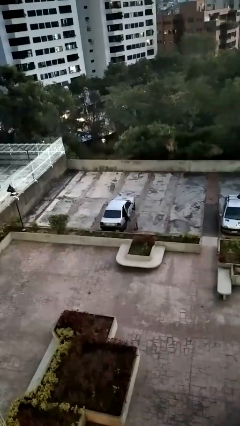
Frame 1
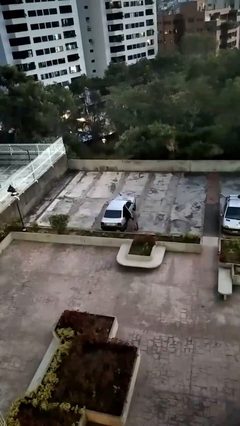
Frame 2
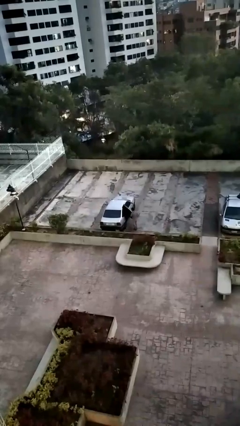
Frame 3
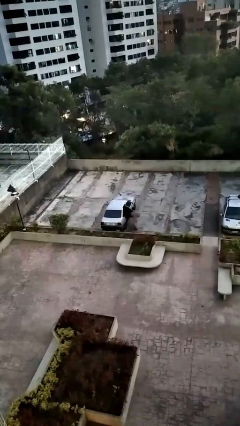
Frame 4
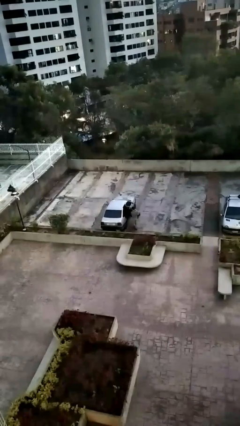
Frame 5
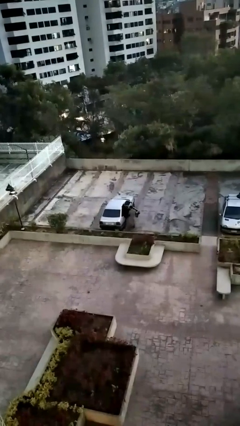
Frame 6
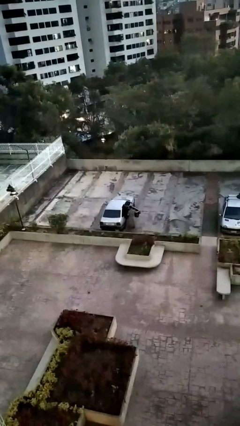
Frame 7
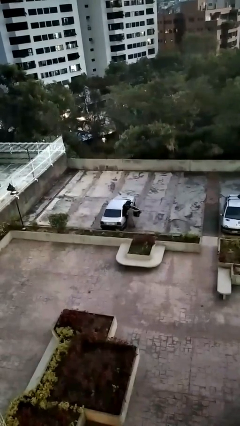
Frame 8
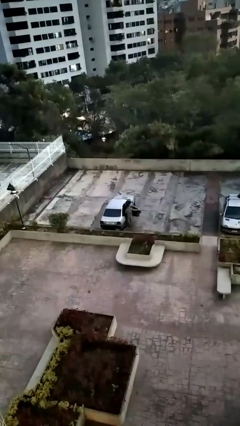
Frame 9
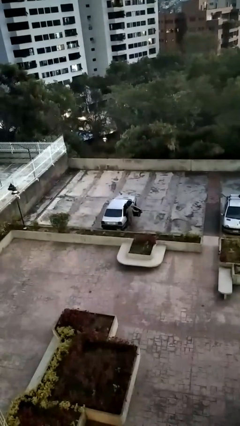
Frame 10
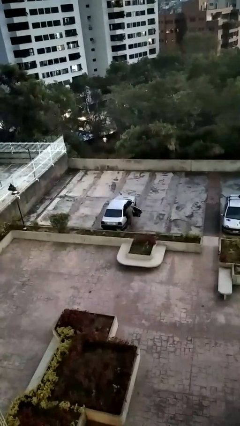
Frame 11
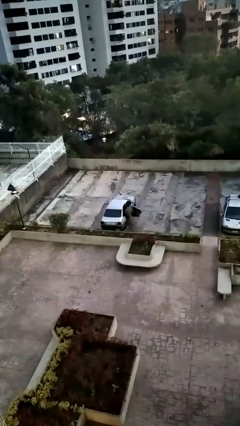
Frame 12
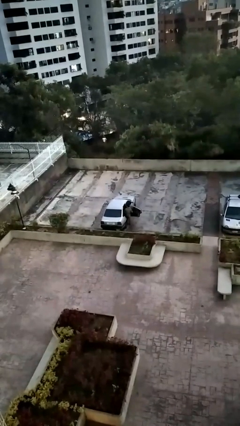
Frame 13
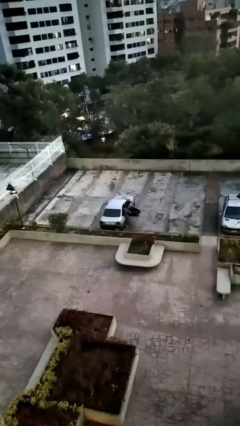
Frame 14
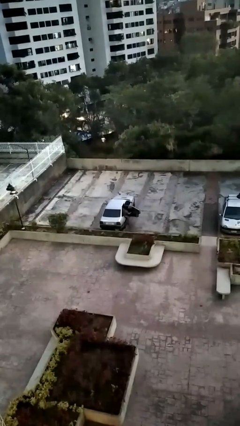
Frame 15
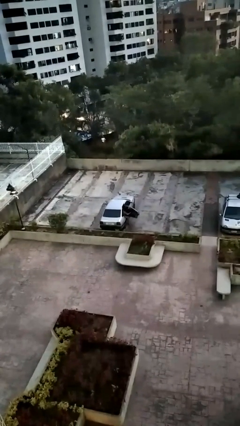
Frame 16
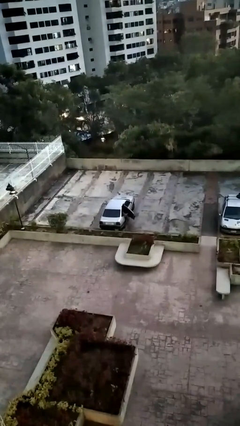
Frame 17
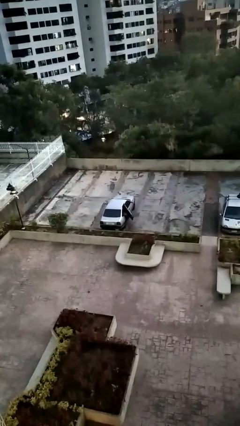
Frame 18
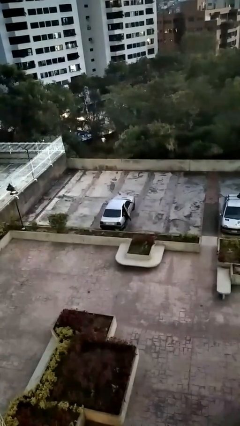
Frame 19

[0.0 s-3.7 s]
car picks up person

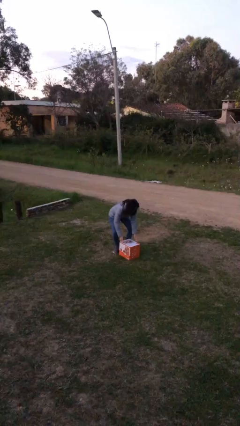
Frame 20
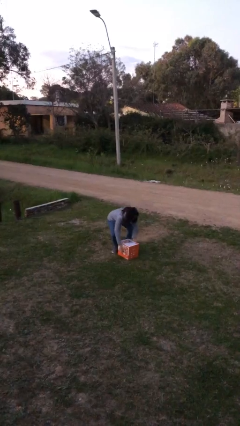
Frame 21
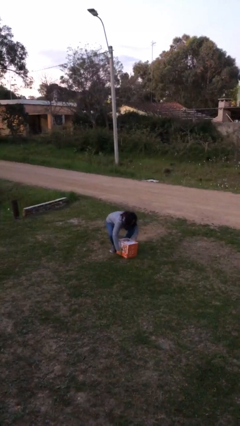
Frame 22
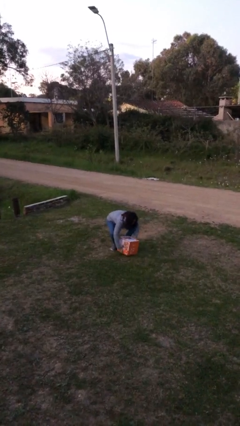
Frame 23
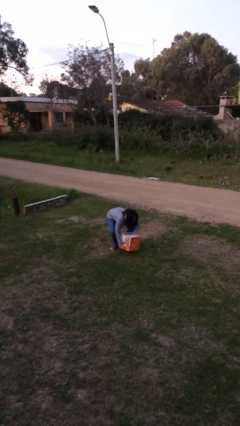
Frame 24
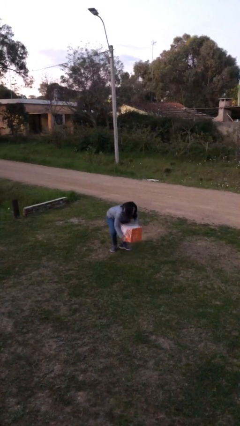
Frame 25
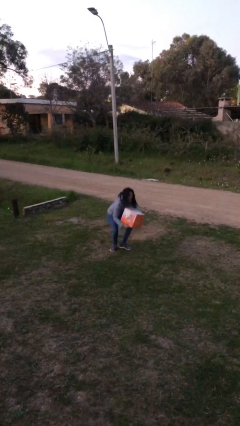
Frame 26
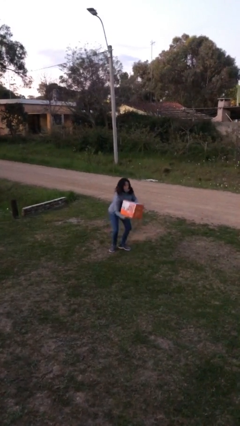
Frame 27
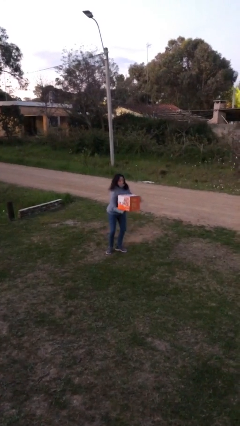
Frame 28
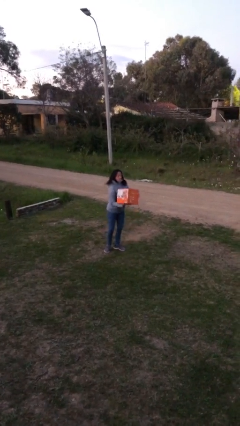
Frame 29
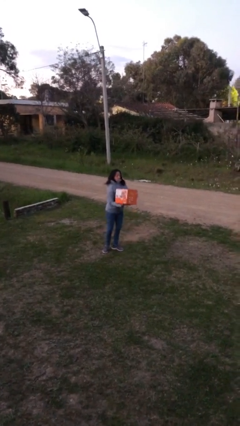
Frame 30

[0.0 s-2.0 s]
person picks up object from floor

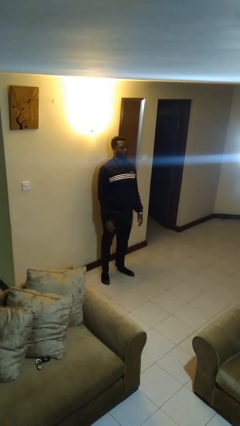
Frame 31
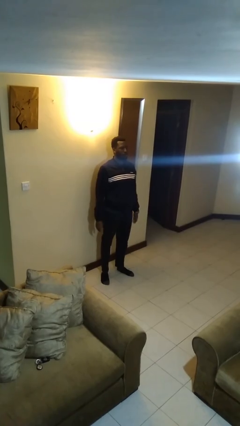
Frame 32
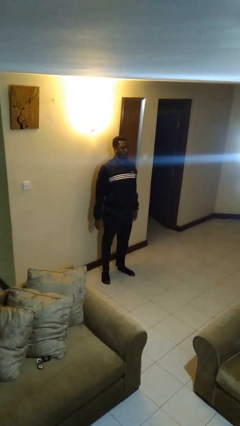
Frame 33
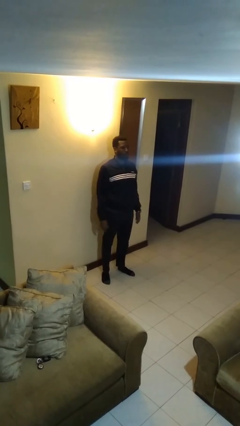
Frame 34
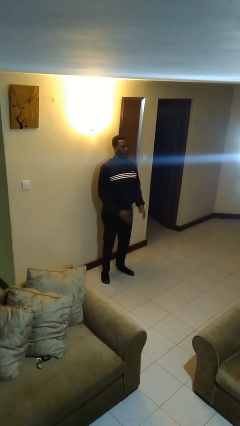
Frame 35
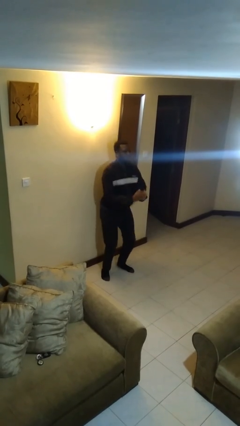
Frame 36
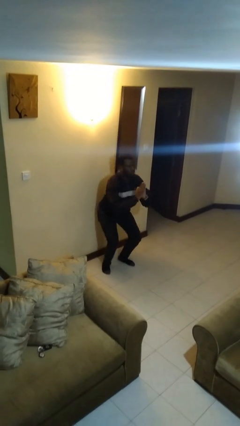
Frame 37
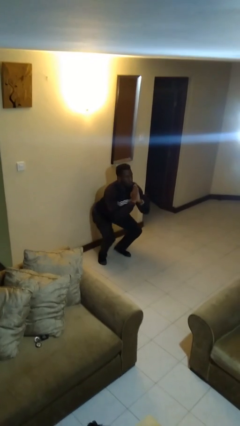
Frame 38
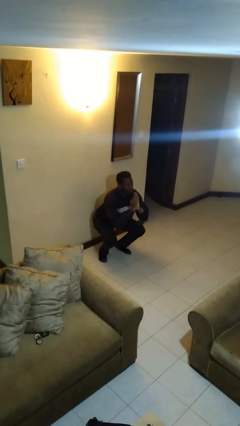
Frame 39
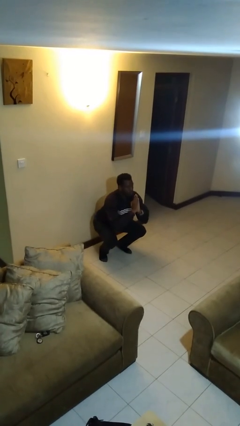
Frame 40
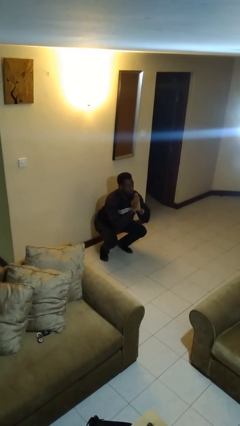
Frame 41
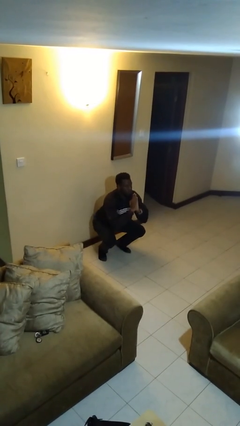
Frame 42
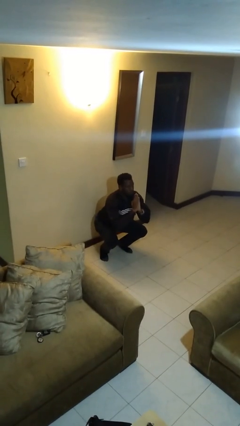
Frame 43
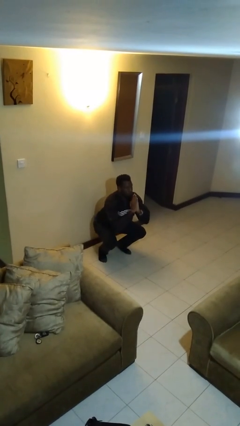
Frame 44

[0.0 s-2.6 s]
person squats

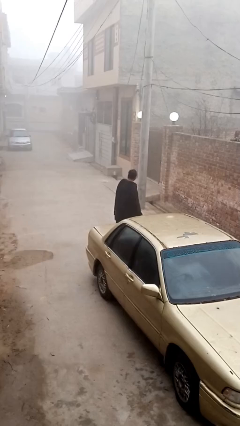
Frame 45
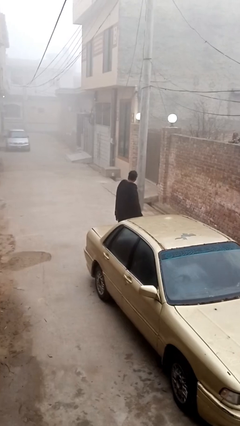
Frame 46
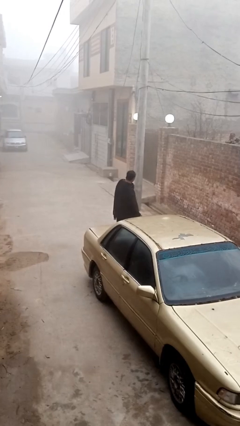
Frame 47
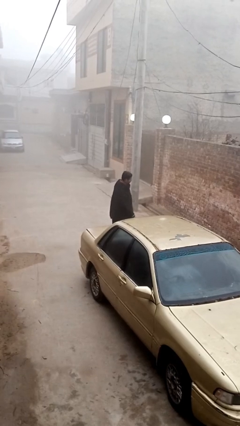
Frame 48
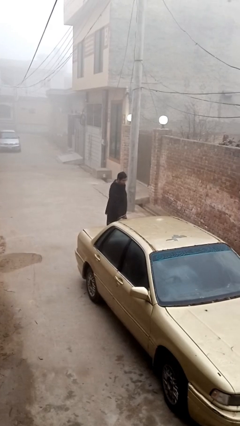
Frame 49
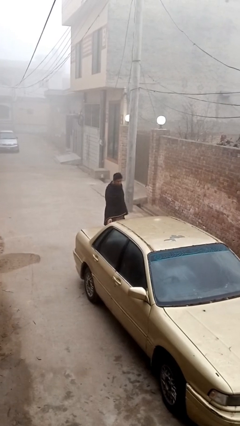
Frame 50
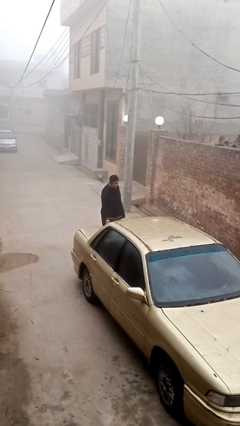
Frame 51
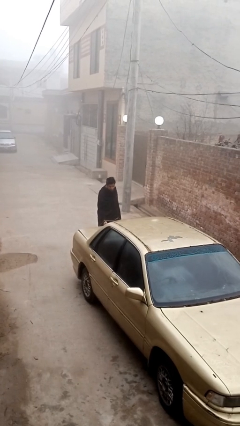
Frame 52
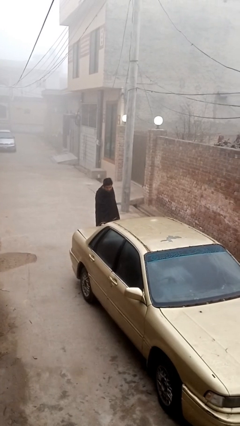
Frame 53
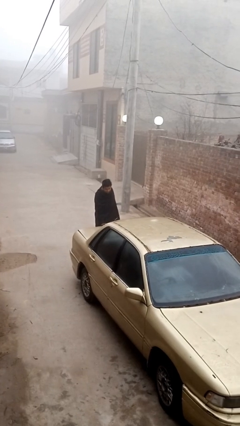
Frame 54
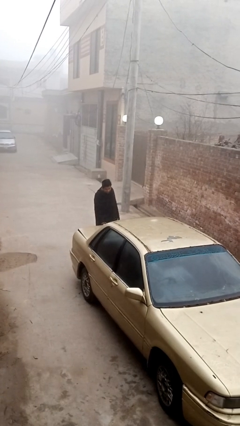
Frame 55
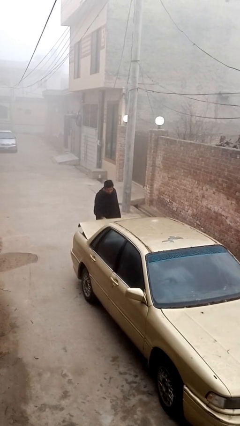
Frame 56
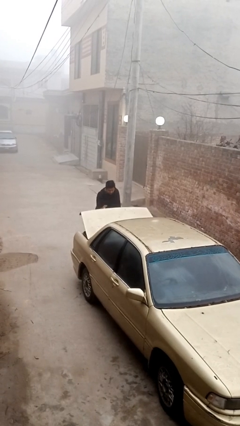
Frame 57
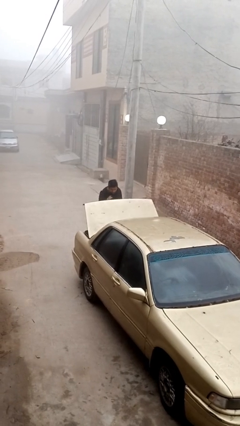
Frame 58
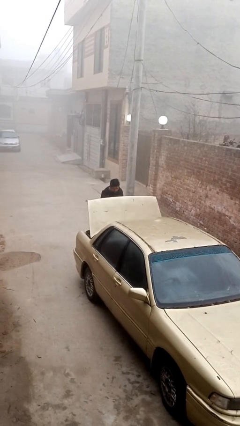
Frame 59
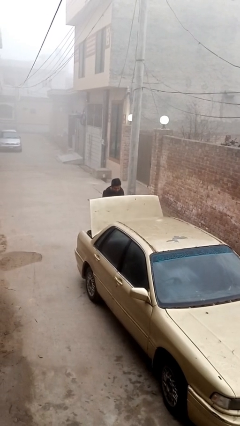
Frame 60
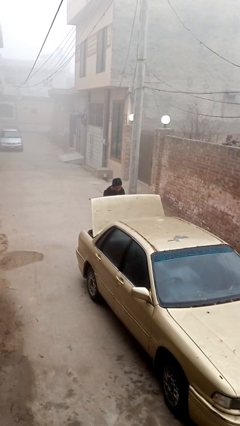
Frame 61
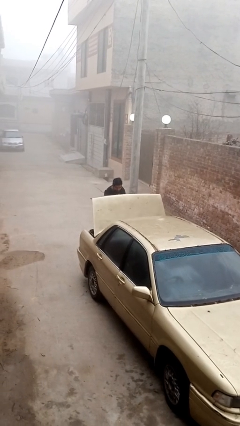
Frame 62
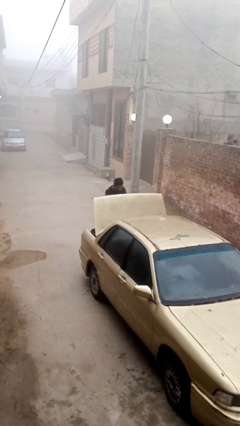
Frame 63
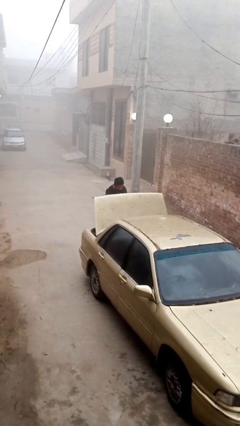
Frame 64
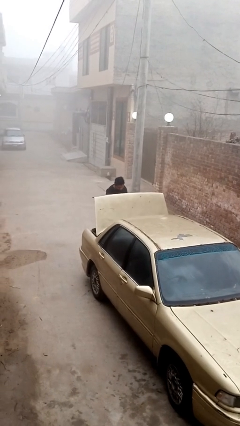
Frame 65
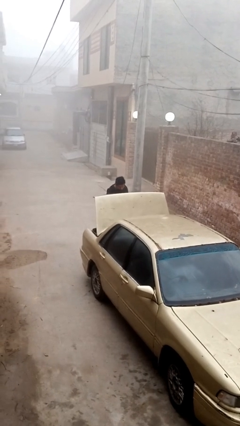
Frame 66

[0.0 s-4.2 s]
person opens car trunk

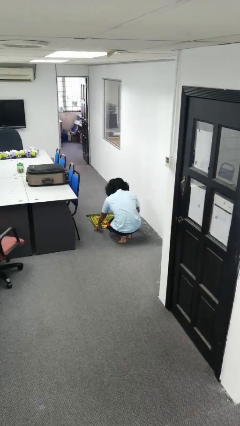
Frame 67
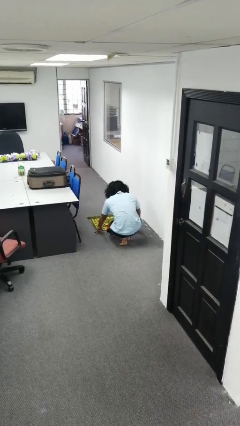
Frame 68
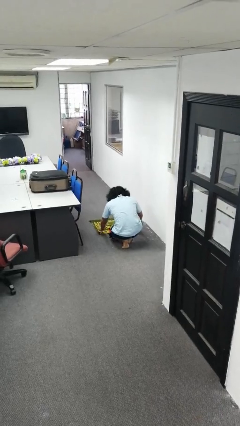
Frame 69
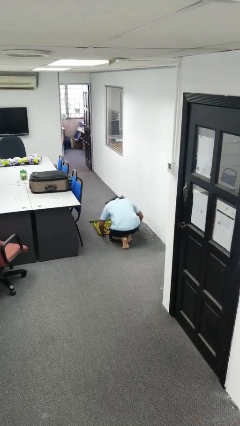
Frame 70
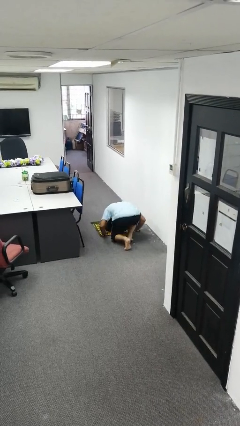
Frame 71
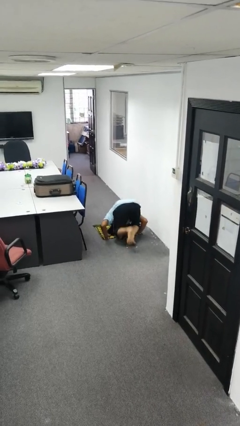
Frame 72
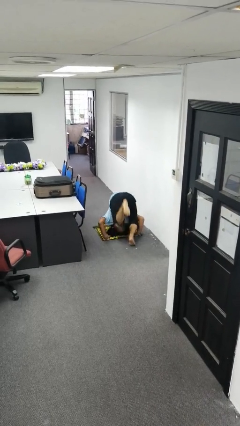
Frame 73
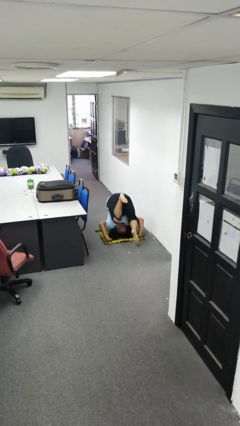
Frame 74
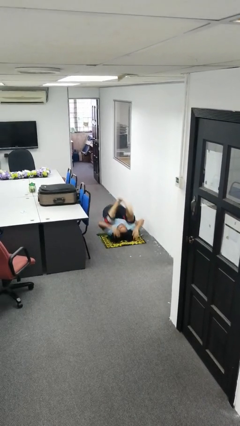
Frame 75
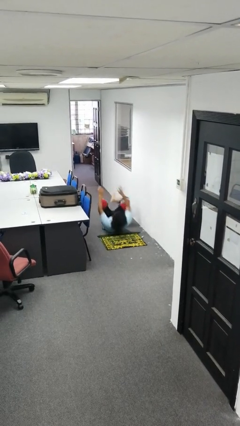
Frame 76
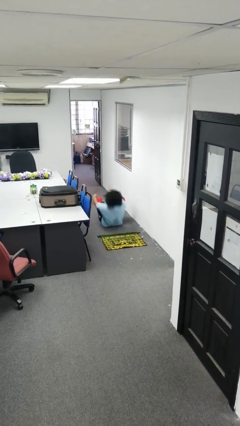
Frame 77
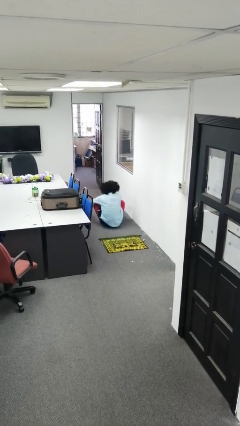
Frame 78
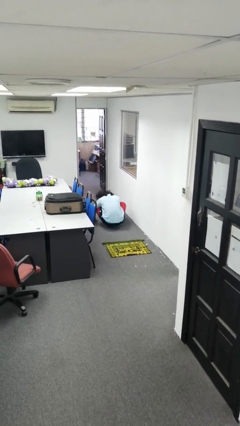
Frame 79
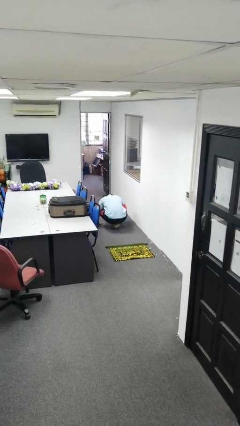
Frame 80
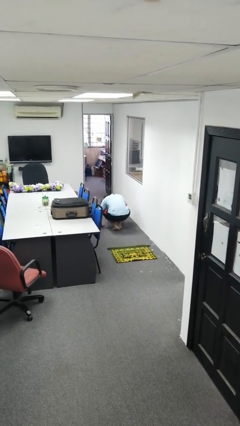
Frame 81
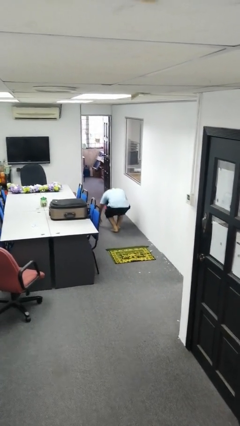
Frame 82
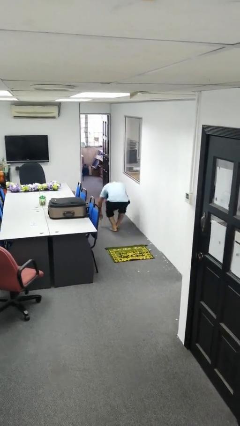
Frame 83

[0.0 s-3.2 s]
person somersaults

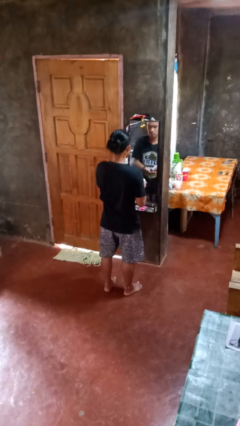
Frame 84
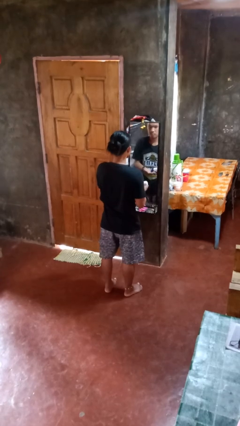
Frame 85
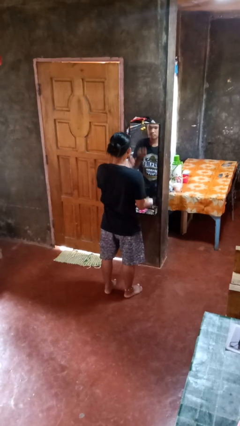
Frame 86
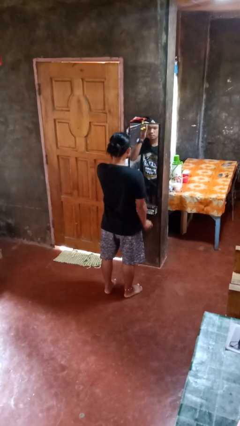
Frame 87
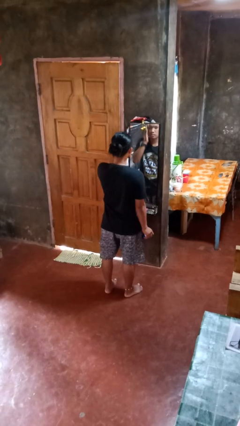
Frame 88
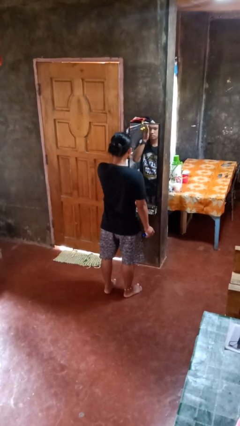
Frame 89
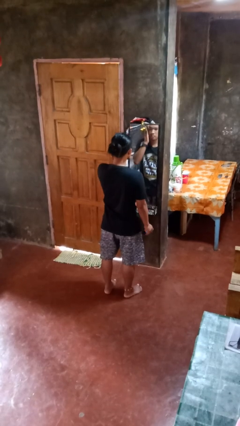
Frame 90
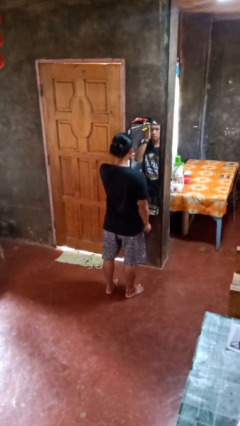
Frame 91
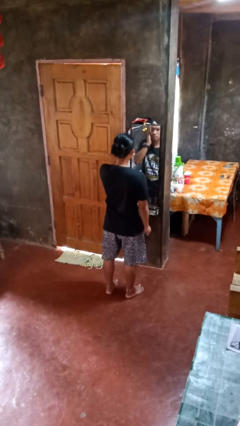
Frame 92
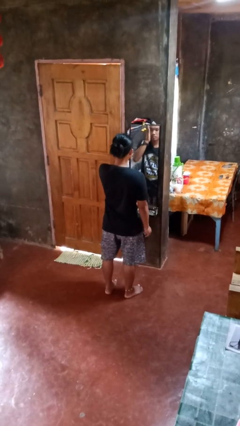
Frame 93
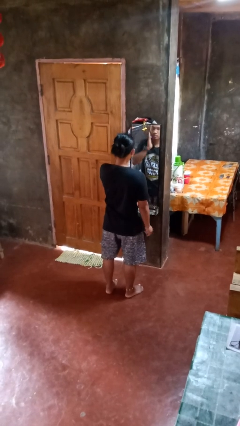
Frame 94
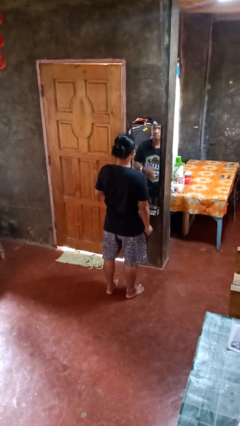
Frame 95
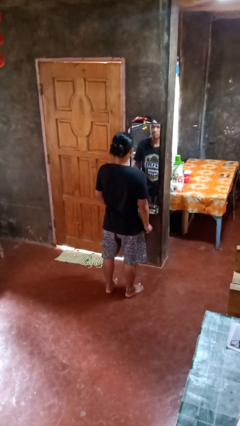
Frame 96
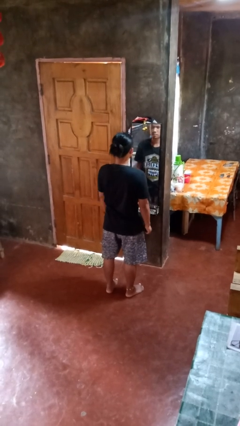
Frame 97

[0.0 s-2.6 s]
person applies eye makeup
